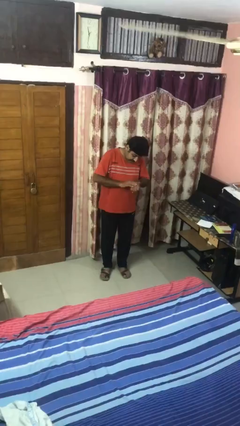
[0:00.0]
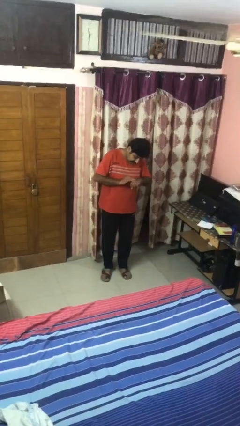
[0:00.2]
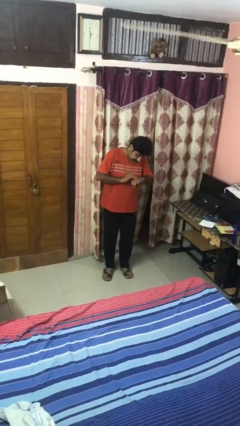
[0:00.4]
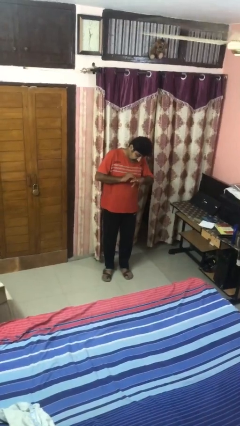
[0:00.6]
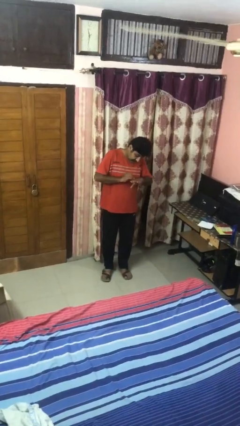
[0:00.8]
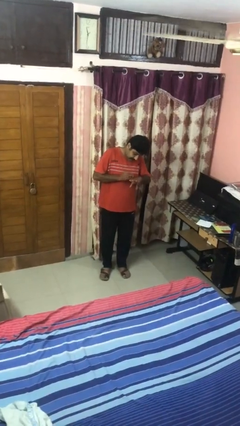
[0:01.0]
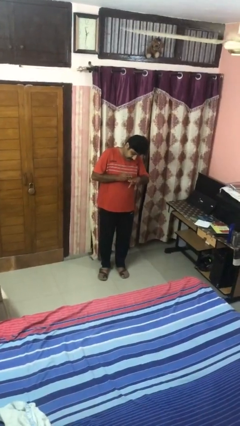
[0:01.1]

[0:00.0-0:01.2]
person swats bug

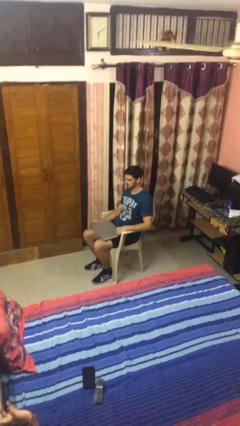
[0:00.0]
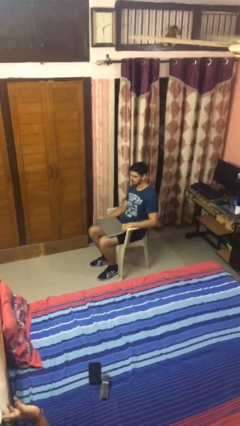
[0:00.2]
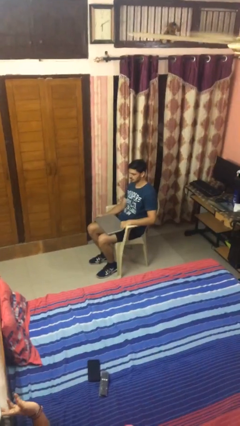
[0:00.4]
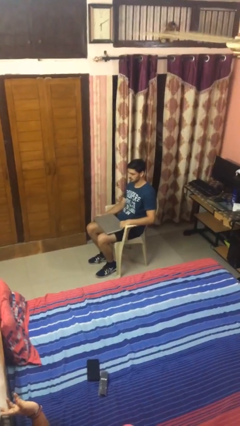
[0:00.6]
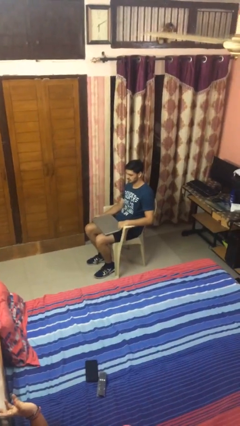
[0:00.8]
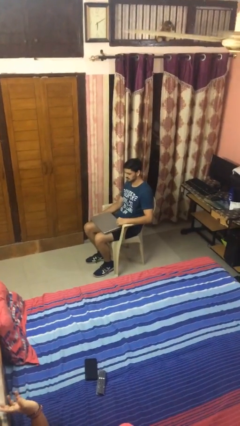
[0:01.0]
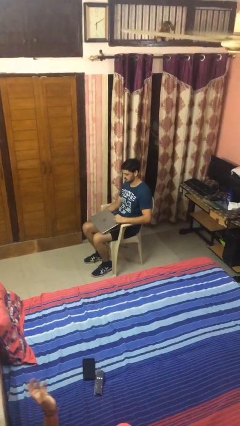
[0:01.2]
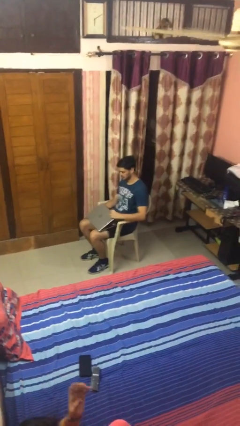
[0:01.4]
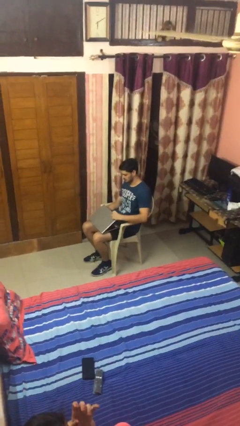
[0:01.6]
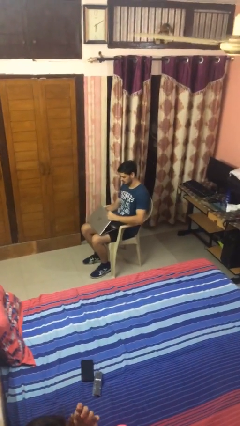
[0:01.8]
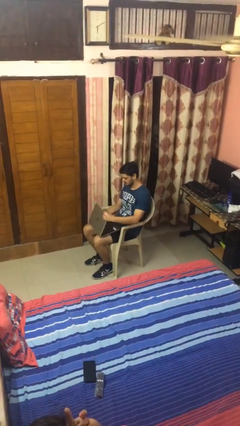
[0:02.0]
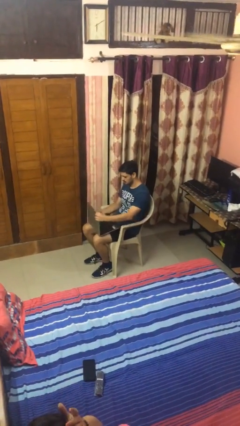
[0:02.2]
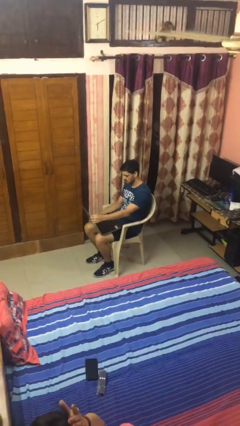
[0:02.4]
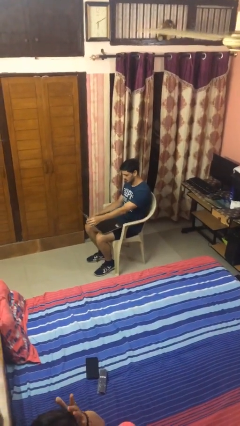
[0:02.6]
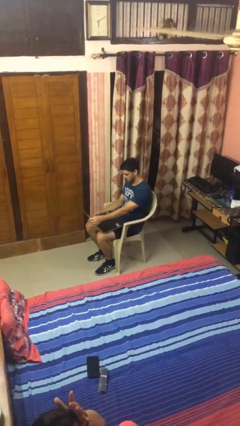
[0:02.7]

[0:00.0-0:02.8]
person opens laptop

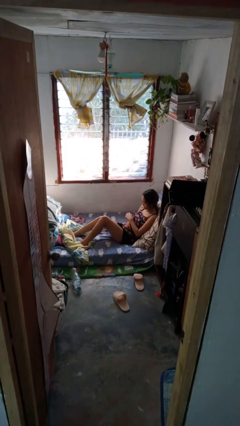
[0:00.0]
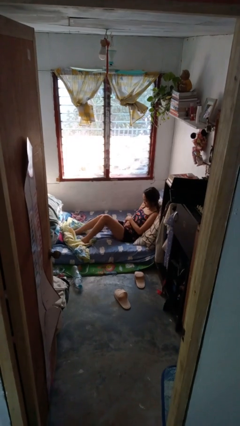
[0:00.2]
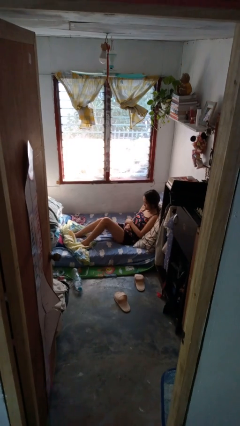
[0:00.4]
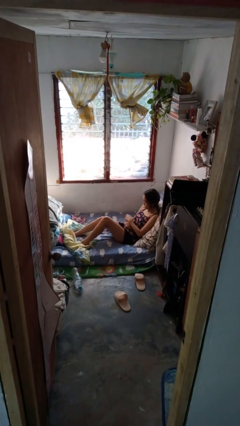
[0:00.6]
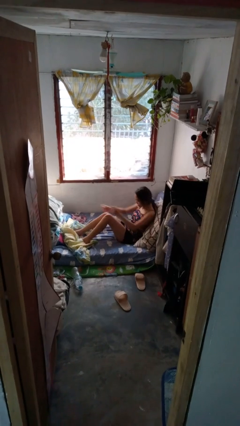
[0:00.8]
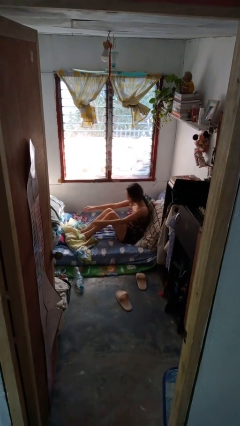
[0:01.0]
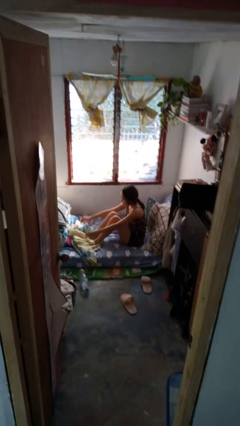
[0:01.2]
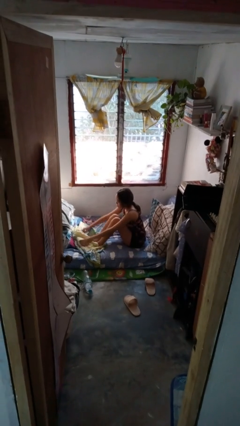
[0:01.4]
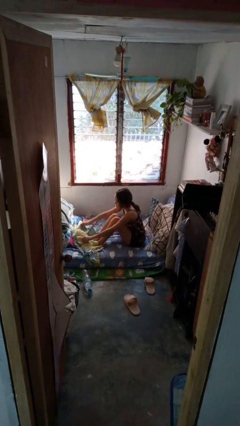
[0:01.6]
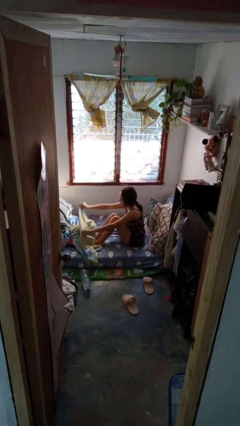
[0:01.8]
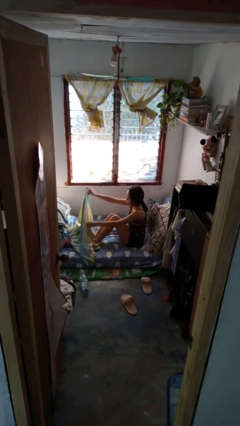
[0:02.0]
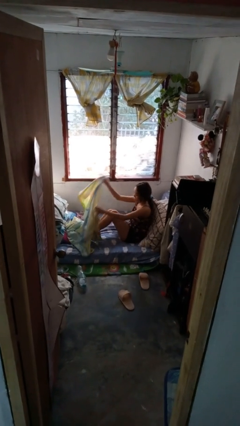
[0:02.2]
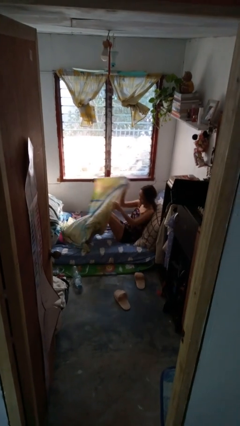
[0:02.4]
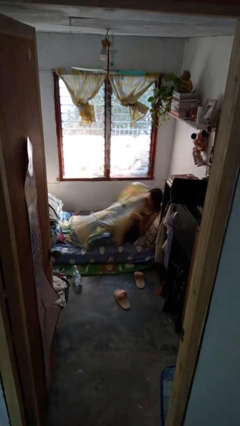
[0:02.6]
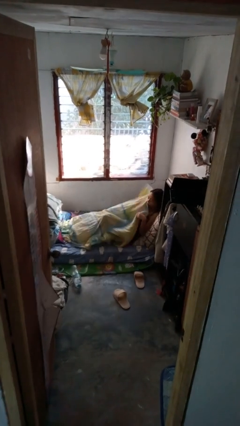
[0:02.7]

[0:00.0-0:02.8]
person covers with bedsheets

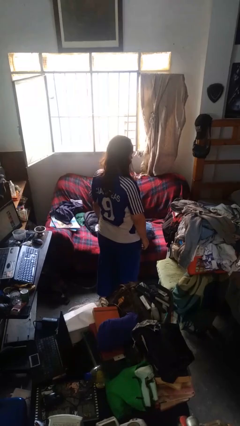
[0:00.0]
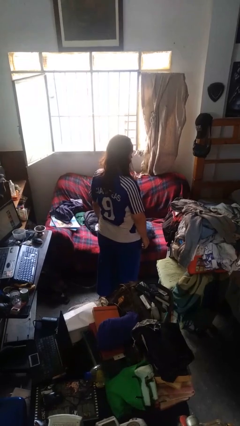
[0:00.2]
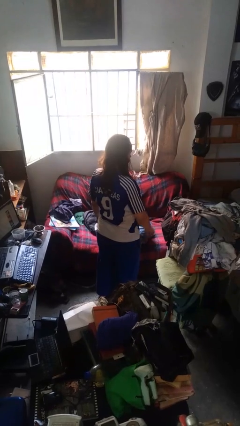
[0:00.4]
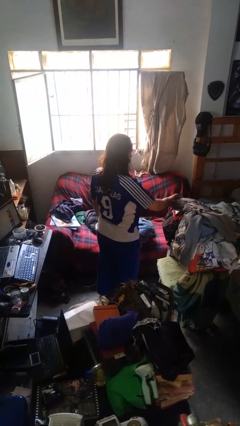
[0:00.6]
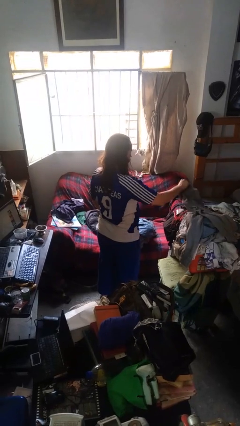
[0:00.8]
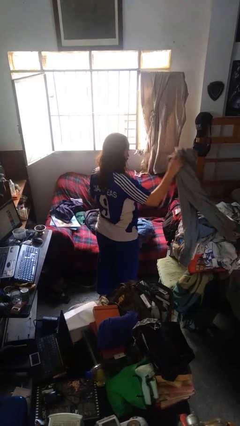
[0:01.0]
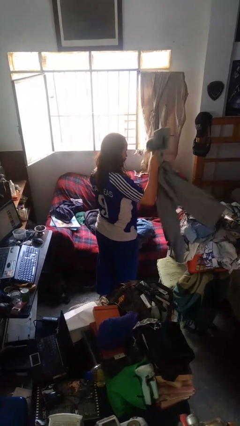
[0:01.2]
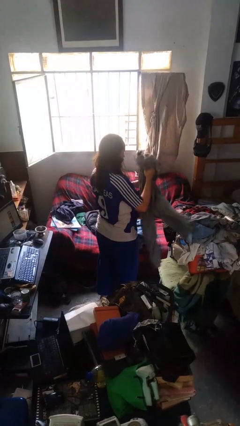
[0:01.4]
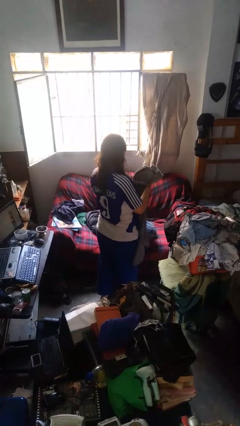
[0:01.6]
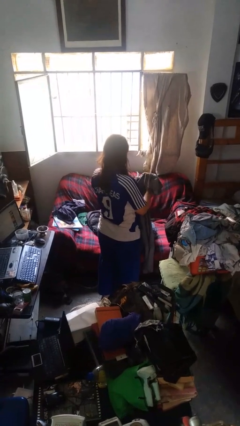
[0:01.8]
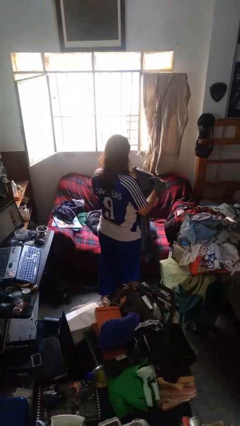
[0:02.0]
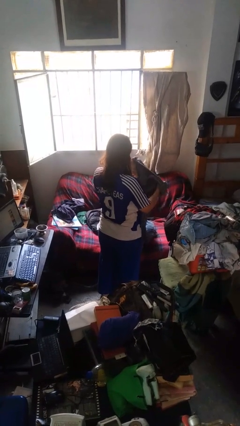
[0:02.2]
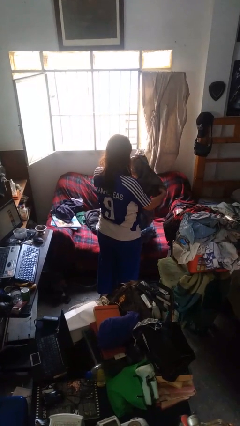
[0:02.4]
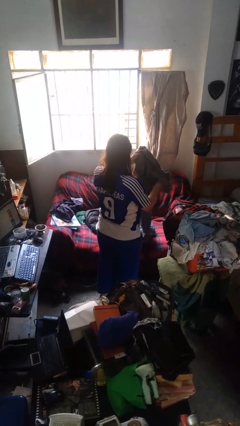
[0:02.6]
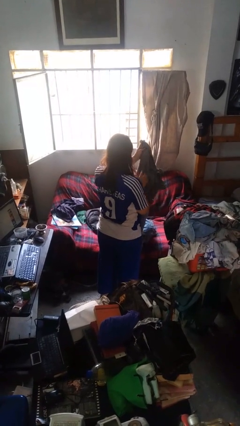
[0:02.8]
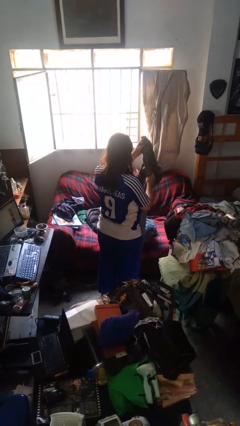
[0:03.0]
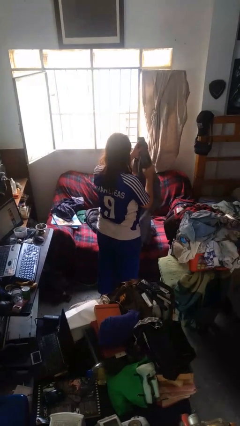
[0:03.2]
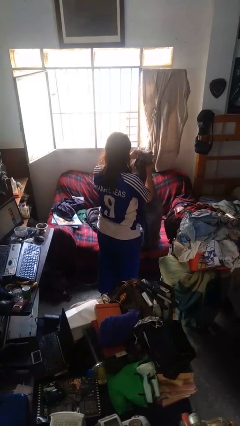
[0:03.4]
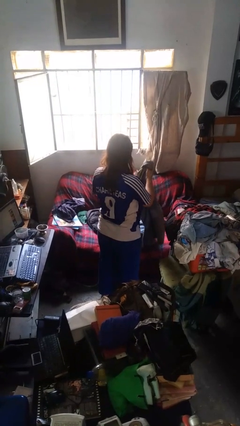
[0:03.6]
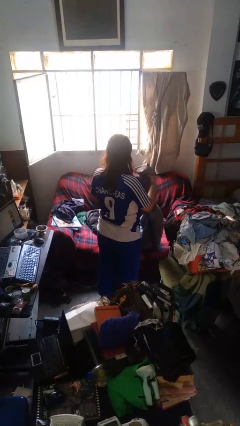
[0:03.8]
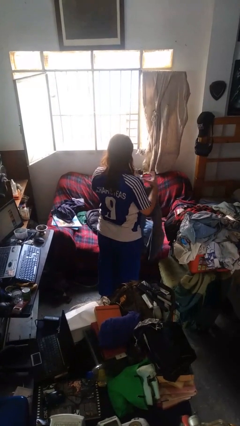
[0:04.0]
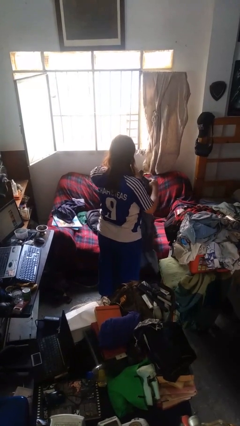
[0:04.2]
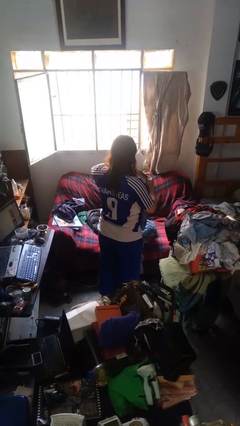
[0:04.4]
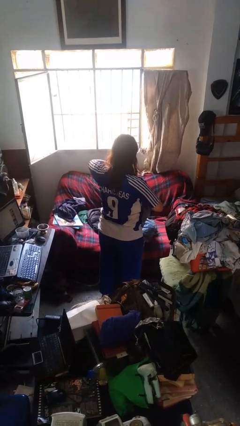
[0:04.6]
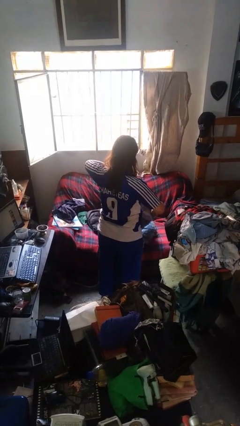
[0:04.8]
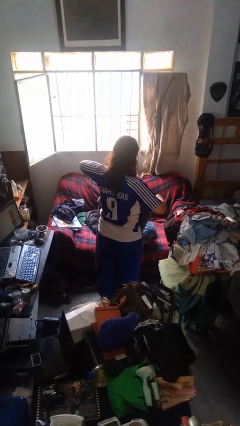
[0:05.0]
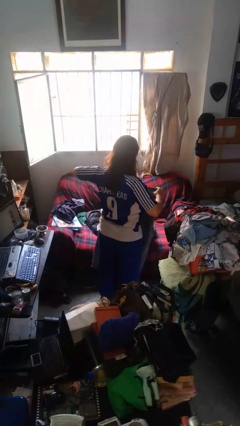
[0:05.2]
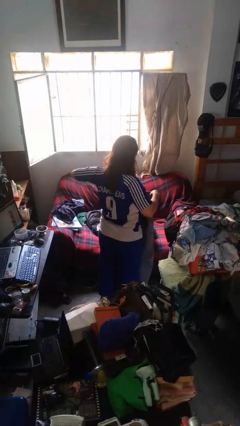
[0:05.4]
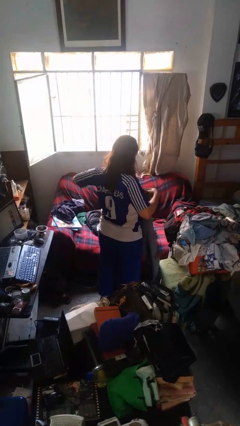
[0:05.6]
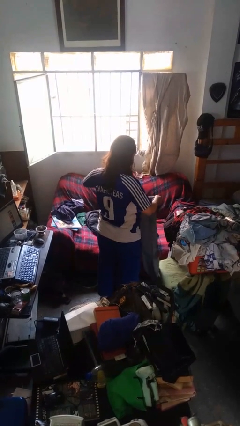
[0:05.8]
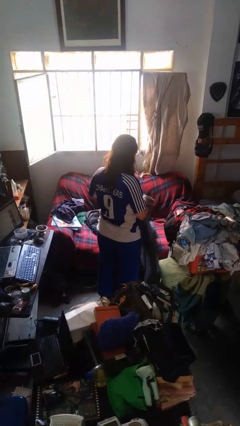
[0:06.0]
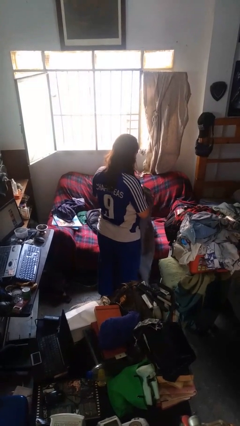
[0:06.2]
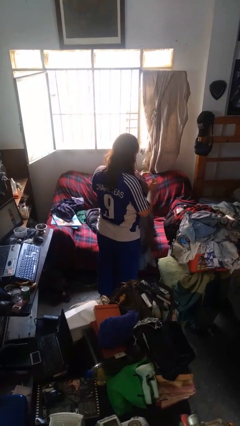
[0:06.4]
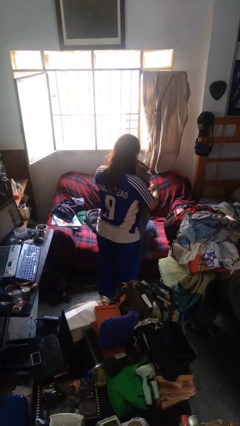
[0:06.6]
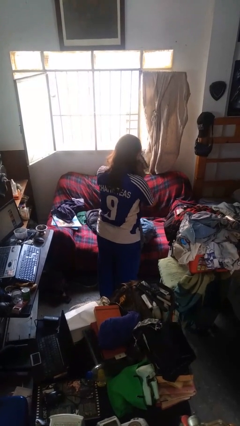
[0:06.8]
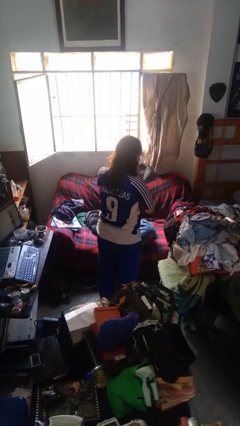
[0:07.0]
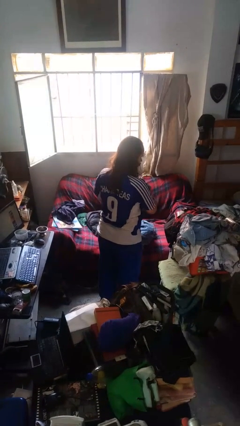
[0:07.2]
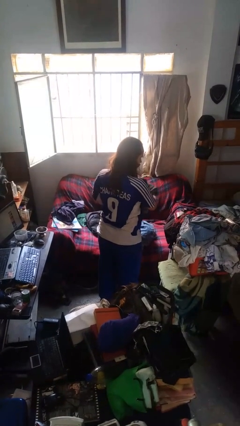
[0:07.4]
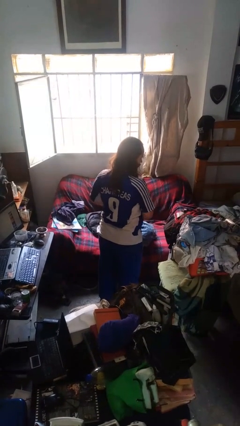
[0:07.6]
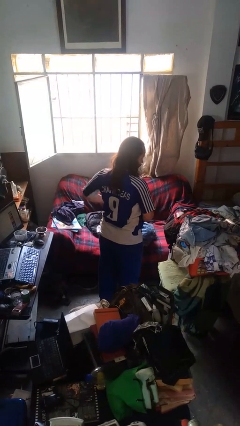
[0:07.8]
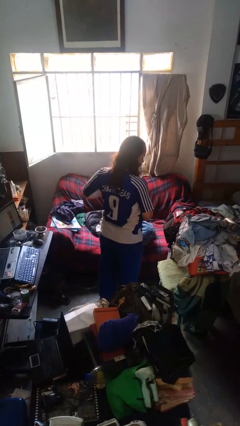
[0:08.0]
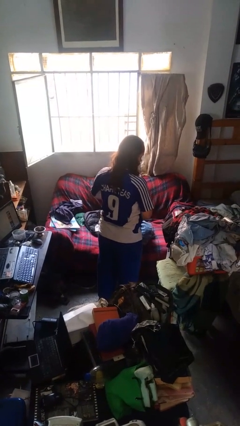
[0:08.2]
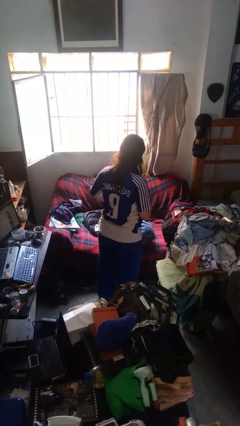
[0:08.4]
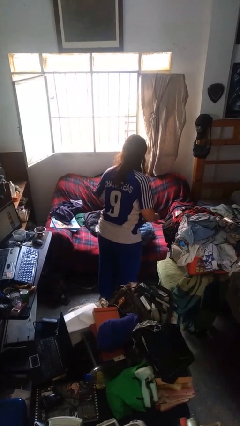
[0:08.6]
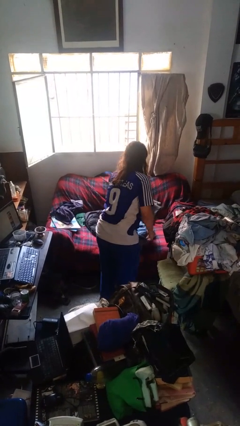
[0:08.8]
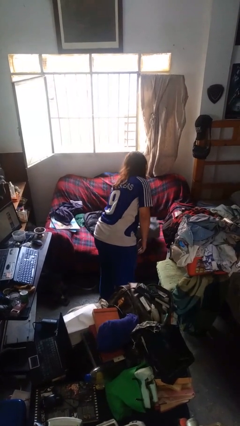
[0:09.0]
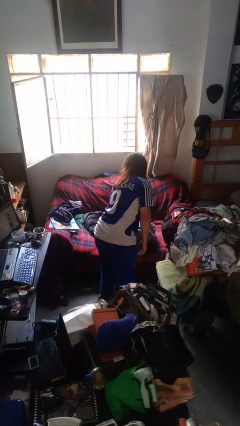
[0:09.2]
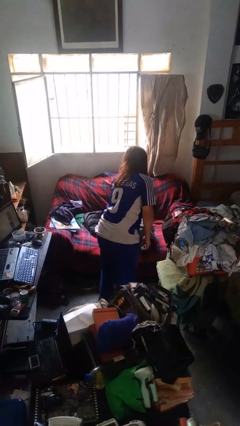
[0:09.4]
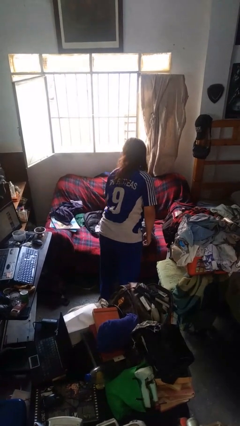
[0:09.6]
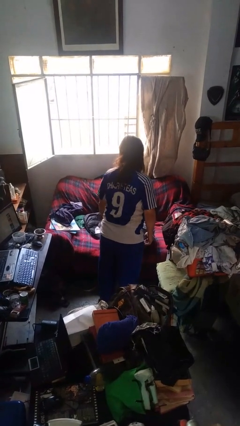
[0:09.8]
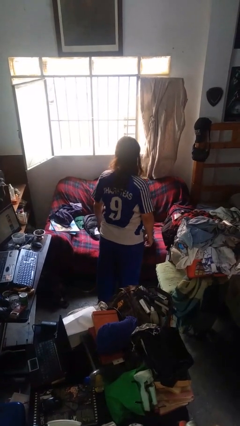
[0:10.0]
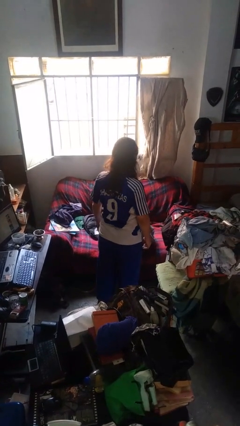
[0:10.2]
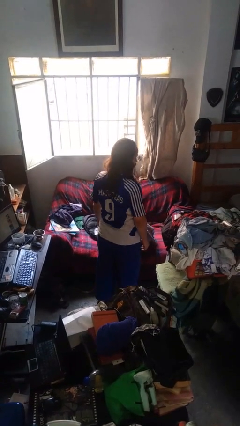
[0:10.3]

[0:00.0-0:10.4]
person folds pants

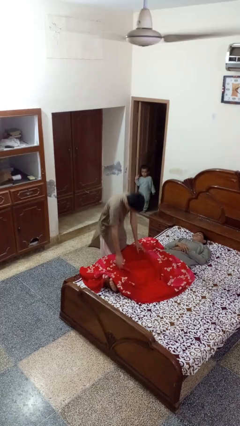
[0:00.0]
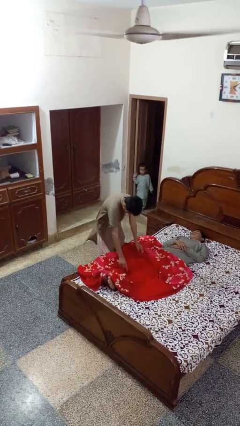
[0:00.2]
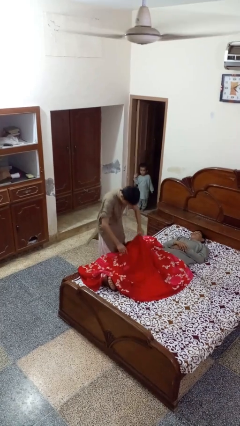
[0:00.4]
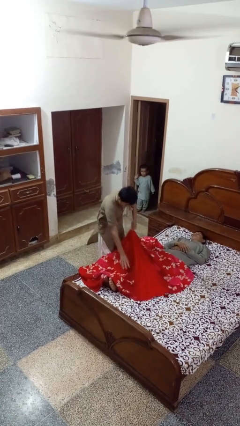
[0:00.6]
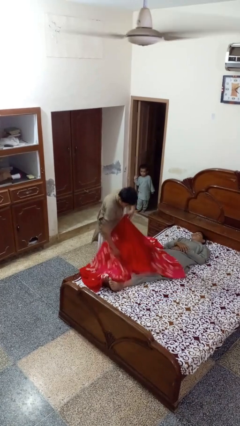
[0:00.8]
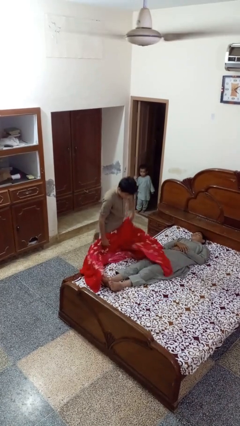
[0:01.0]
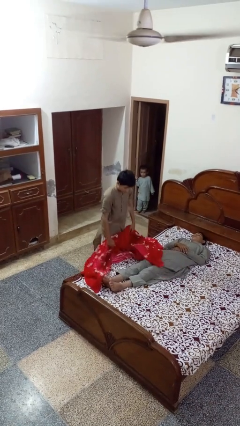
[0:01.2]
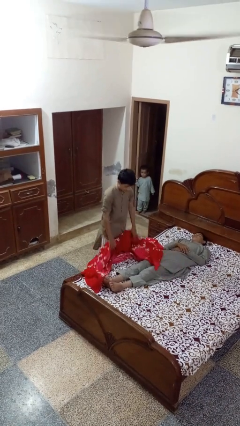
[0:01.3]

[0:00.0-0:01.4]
person uncovers friend with blanket
